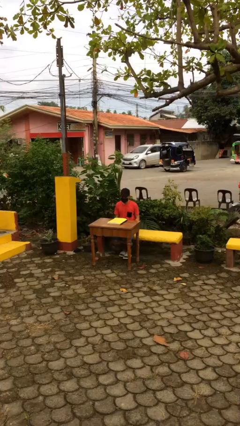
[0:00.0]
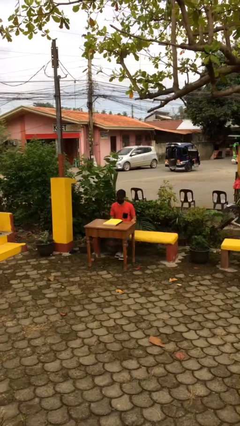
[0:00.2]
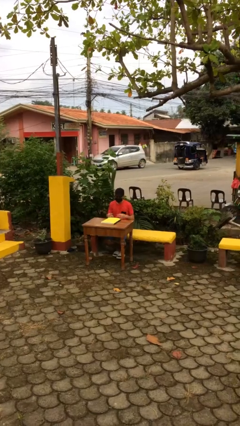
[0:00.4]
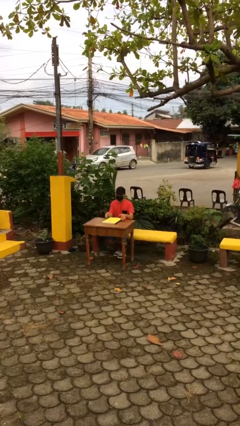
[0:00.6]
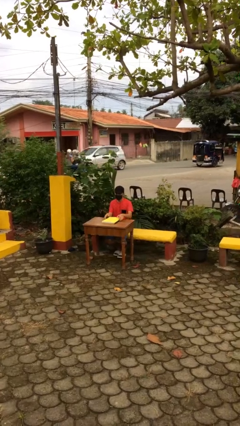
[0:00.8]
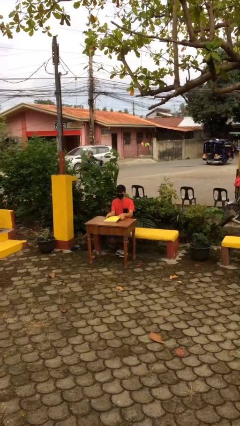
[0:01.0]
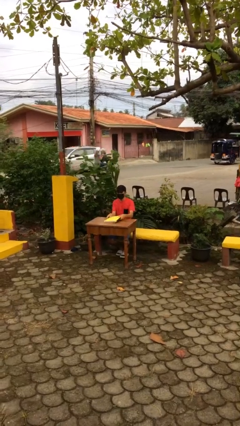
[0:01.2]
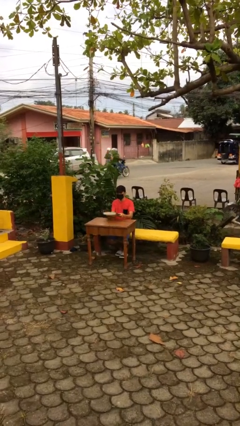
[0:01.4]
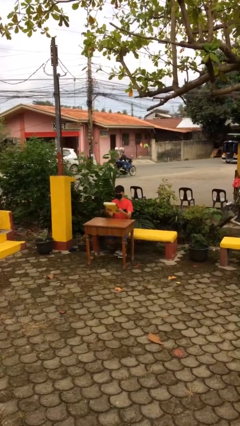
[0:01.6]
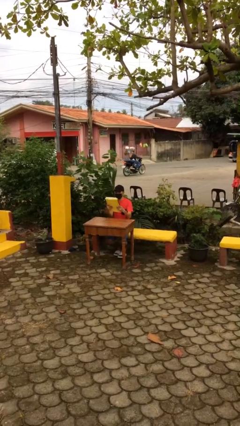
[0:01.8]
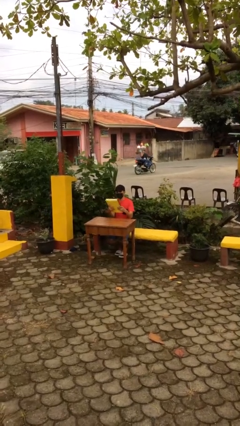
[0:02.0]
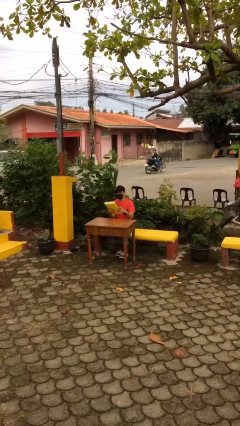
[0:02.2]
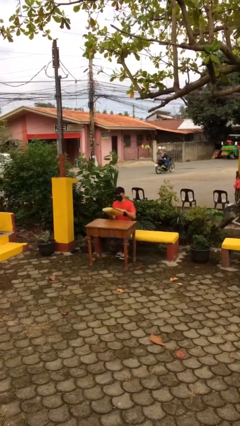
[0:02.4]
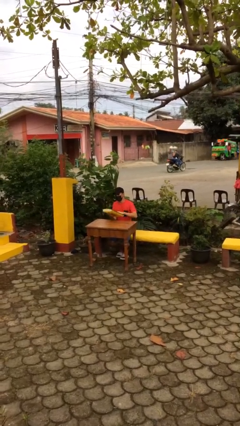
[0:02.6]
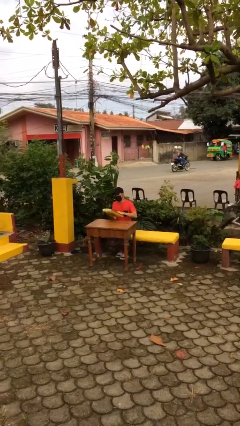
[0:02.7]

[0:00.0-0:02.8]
person picks up object from table

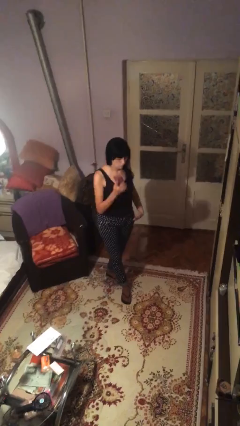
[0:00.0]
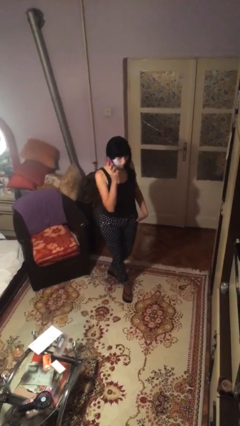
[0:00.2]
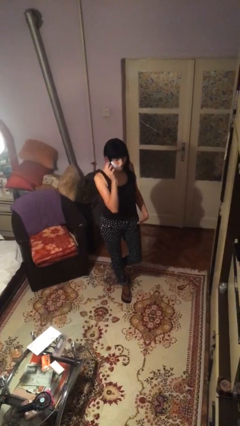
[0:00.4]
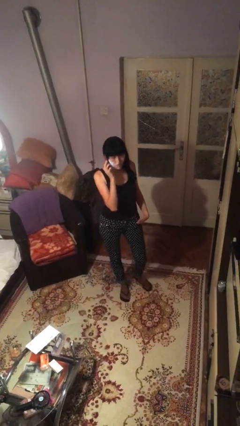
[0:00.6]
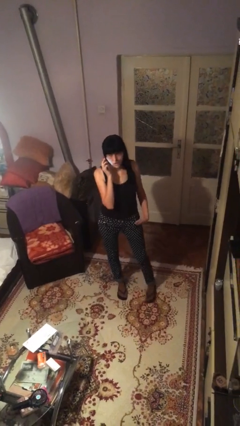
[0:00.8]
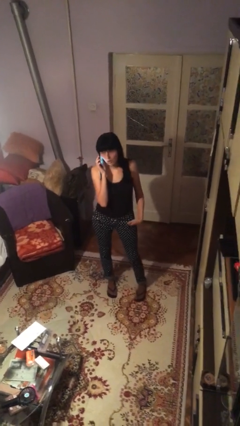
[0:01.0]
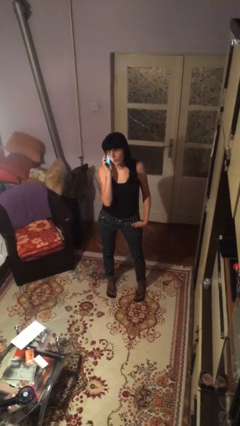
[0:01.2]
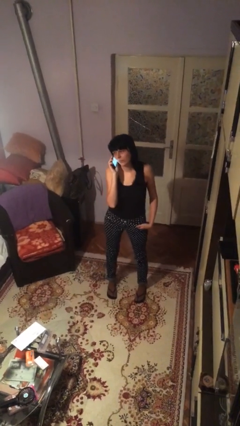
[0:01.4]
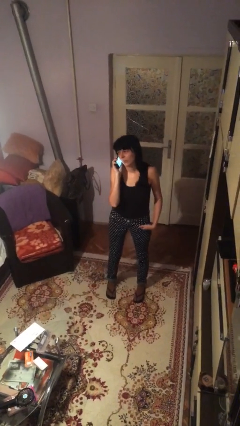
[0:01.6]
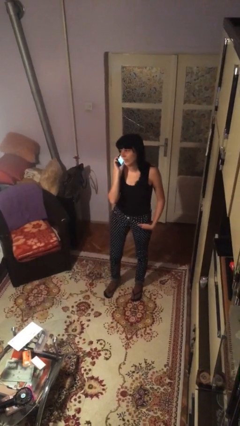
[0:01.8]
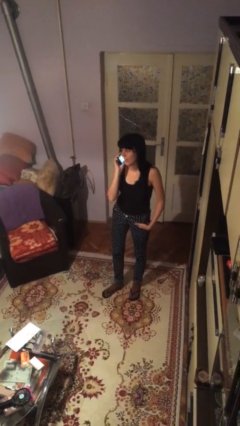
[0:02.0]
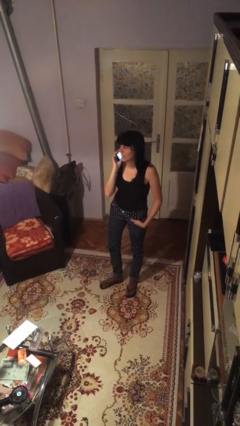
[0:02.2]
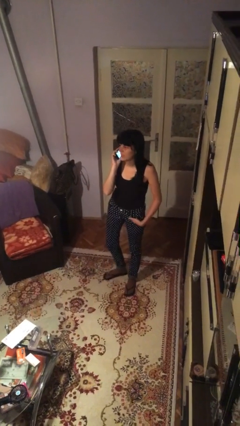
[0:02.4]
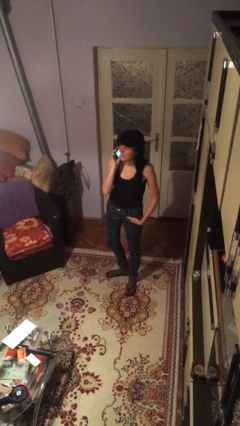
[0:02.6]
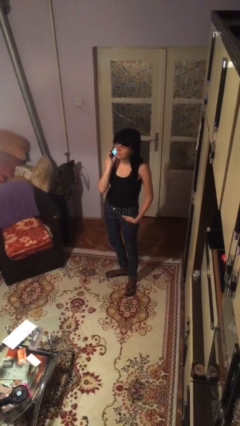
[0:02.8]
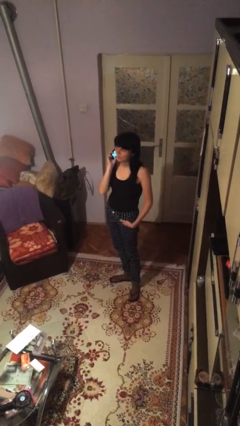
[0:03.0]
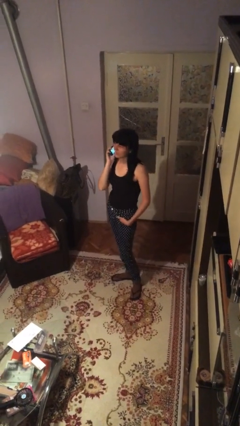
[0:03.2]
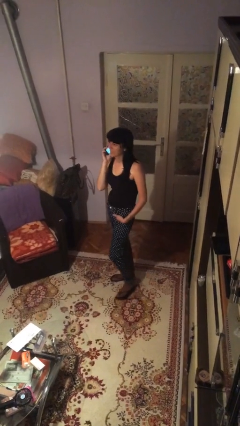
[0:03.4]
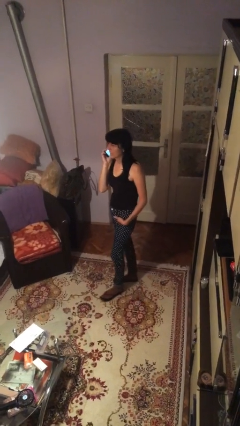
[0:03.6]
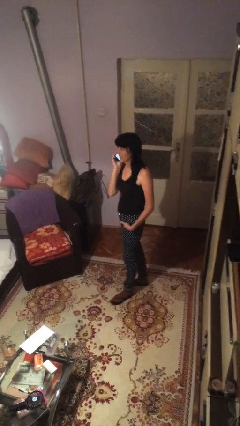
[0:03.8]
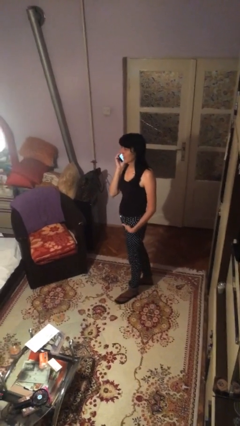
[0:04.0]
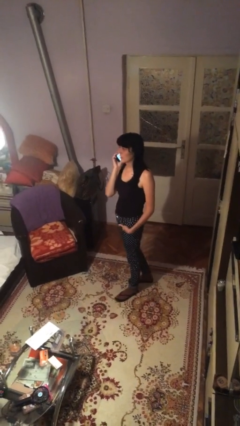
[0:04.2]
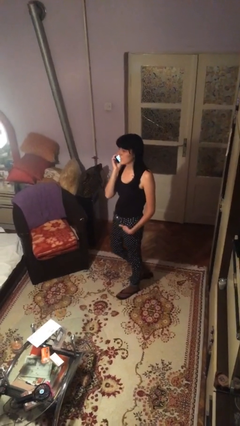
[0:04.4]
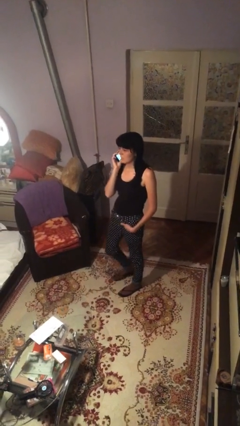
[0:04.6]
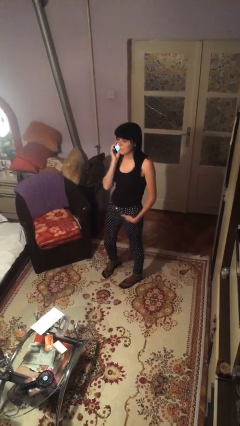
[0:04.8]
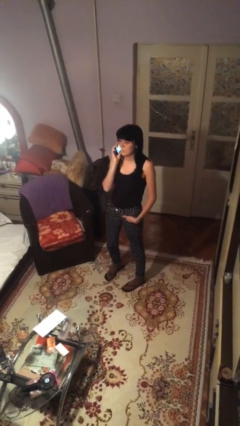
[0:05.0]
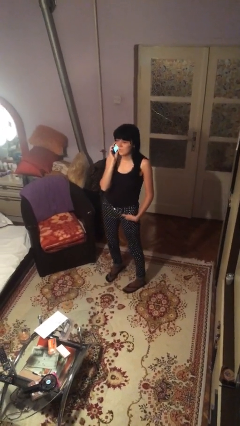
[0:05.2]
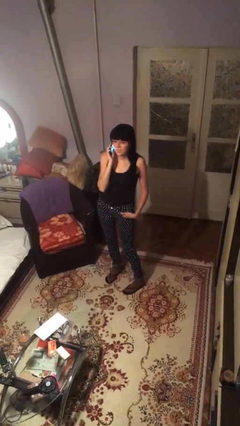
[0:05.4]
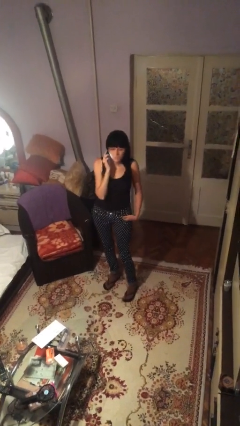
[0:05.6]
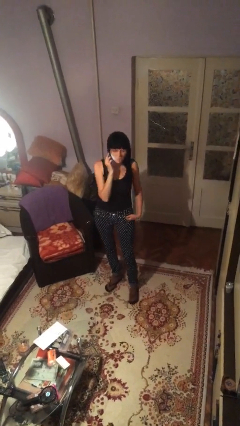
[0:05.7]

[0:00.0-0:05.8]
person talks on phone

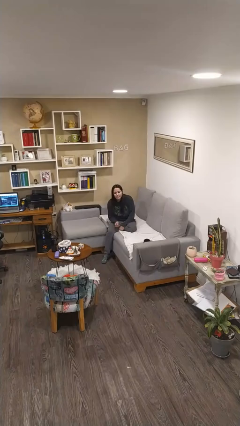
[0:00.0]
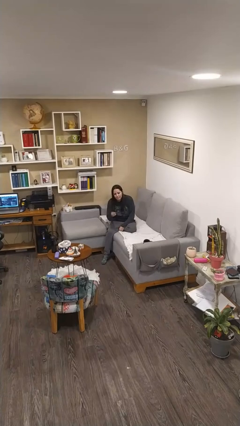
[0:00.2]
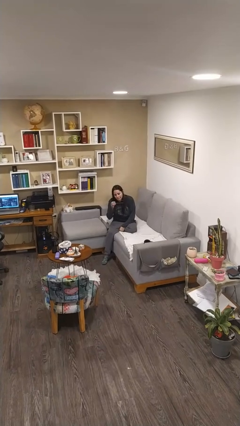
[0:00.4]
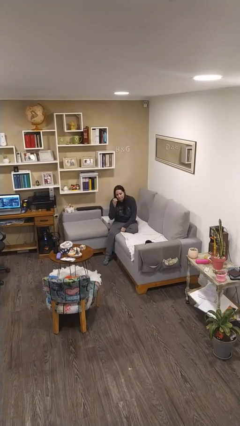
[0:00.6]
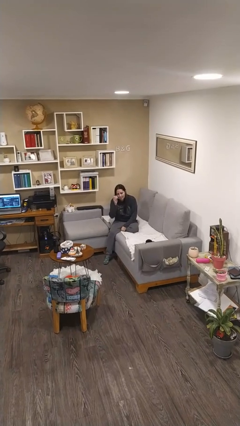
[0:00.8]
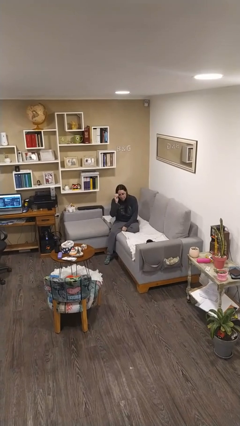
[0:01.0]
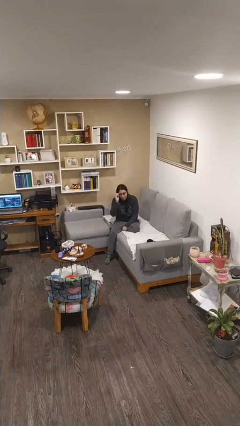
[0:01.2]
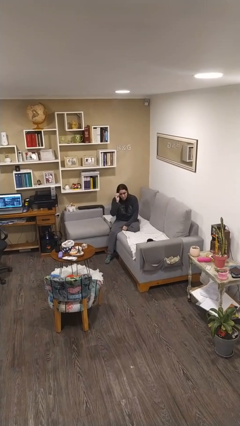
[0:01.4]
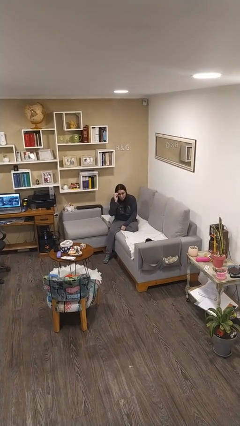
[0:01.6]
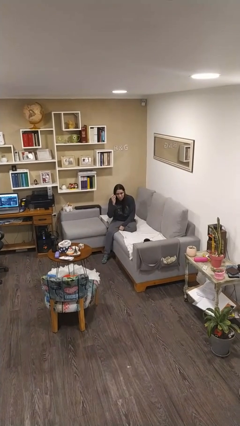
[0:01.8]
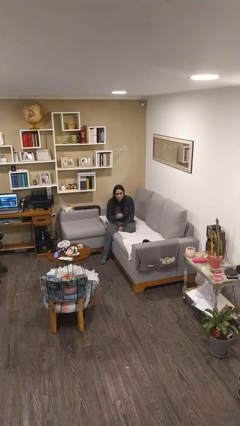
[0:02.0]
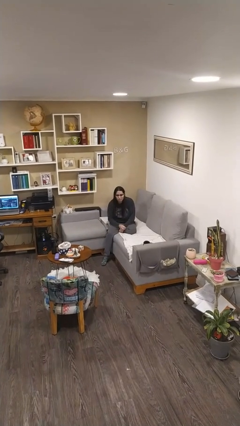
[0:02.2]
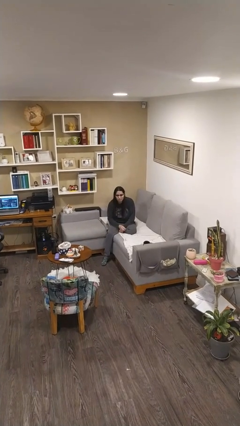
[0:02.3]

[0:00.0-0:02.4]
person puts on glasses

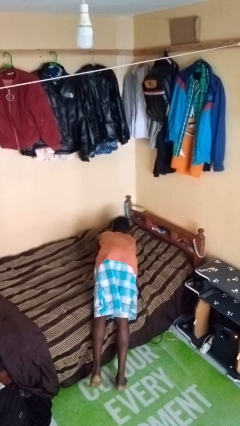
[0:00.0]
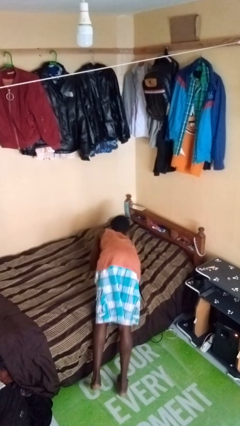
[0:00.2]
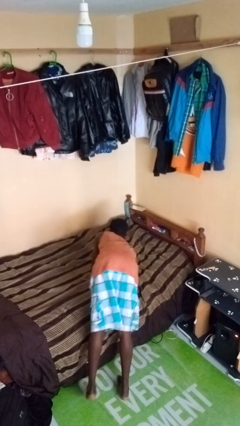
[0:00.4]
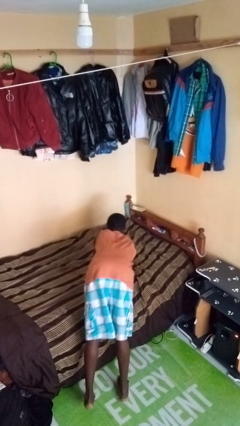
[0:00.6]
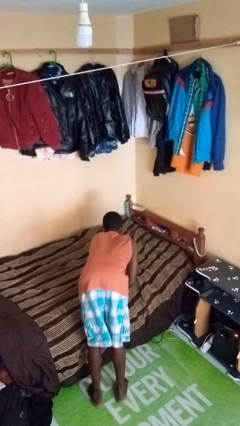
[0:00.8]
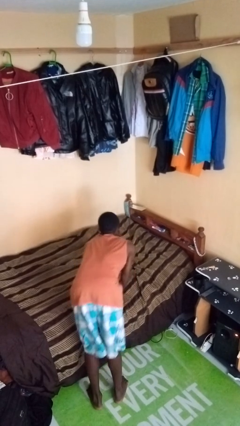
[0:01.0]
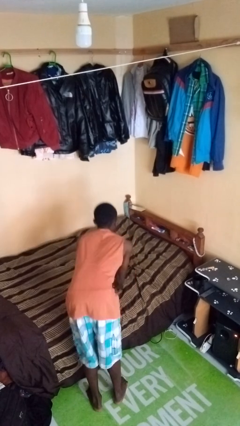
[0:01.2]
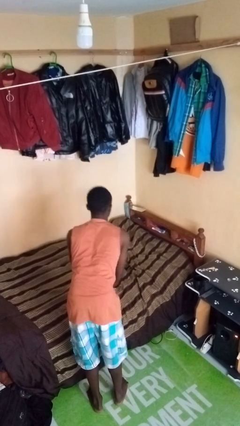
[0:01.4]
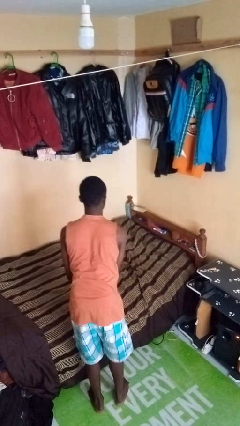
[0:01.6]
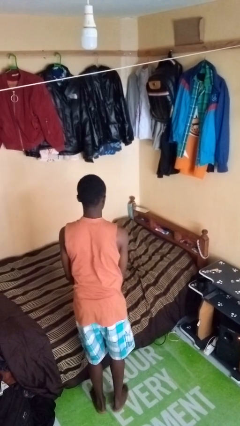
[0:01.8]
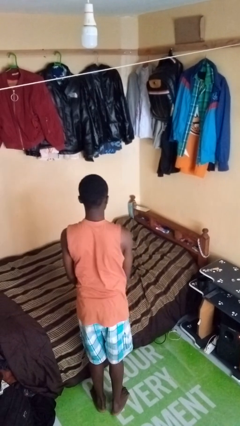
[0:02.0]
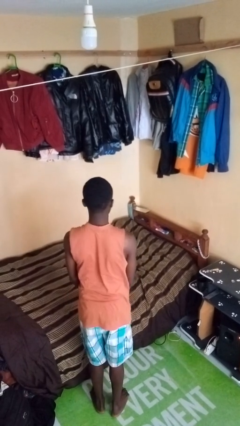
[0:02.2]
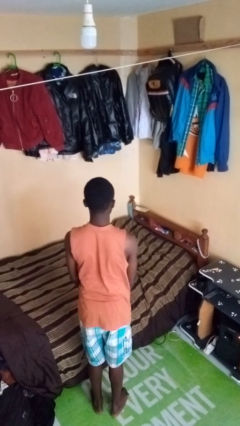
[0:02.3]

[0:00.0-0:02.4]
person stands up

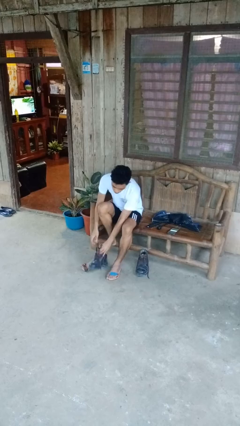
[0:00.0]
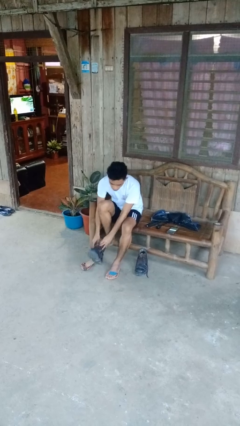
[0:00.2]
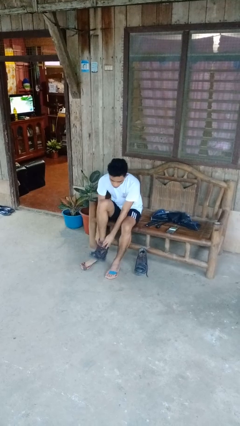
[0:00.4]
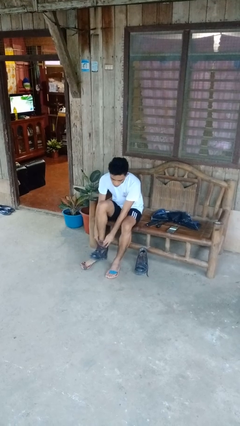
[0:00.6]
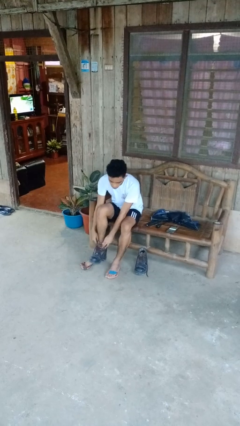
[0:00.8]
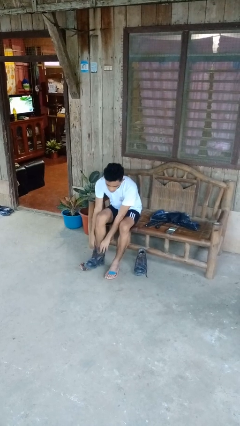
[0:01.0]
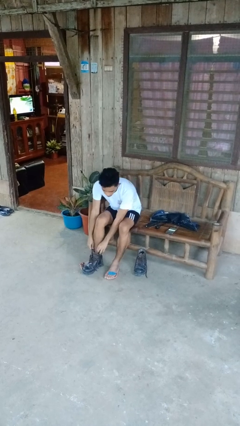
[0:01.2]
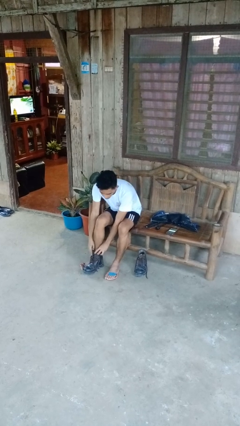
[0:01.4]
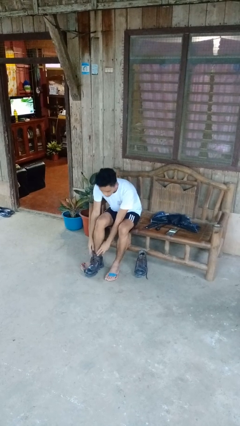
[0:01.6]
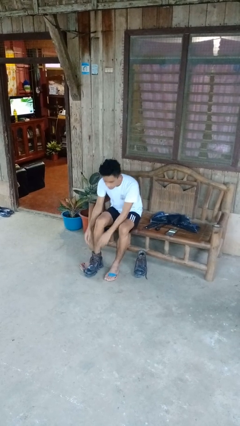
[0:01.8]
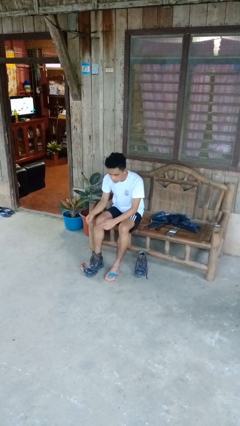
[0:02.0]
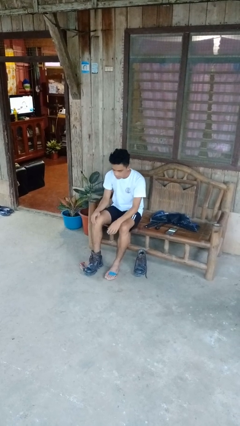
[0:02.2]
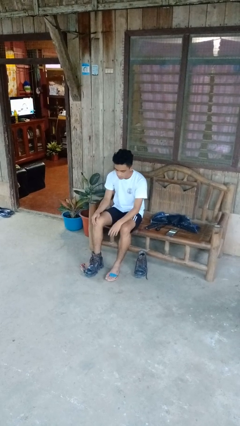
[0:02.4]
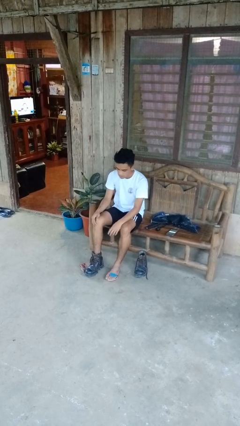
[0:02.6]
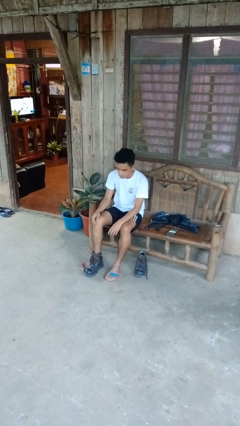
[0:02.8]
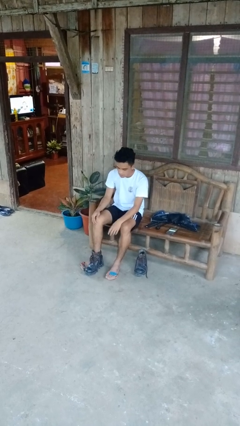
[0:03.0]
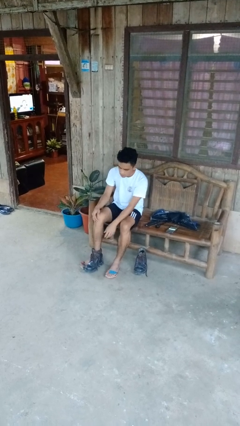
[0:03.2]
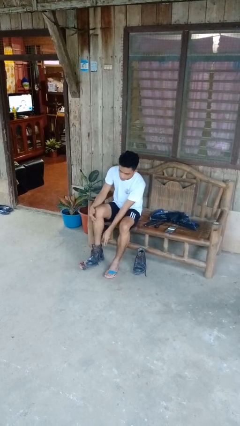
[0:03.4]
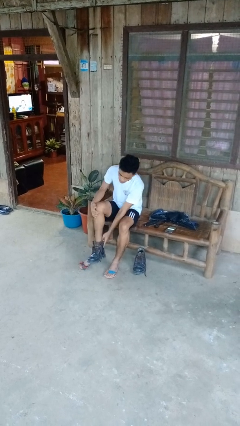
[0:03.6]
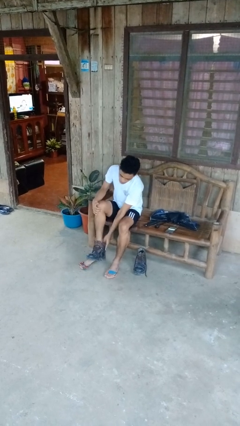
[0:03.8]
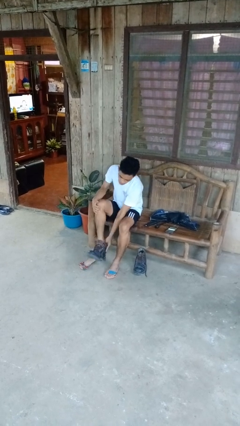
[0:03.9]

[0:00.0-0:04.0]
person puts on boots
